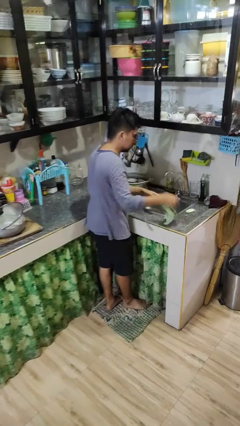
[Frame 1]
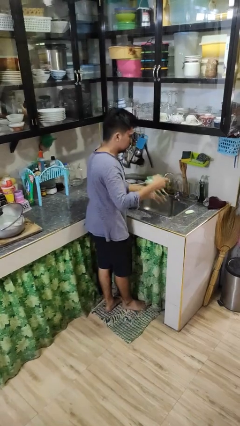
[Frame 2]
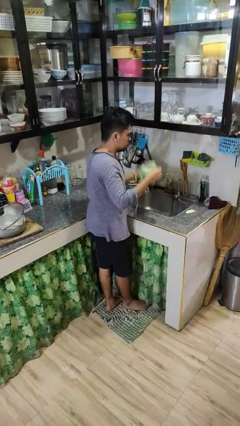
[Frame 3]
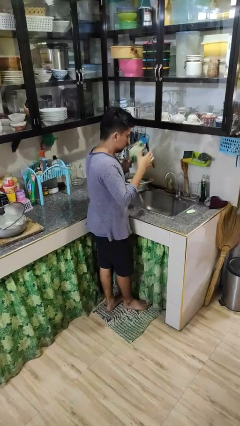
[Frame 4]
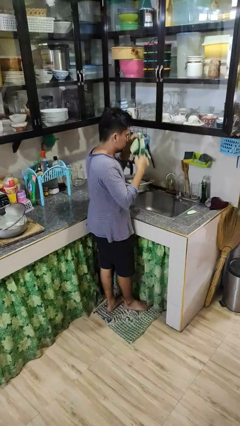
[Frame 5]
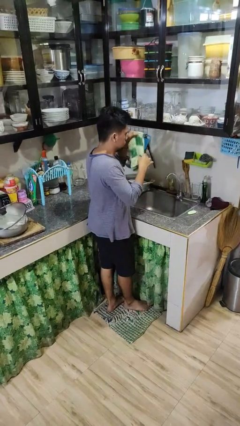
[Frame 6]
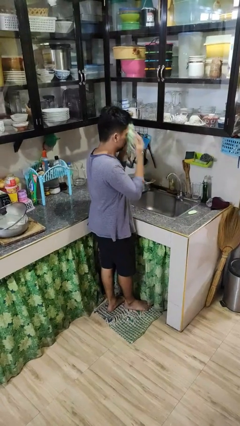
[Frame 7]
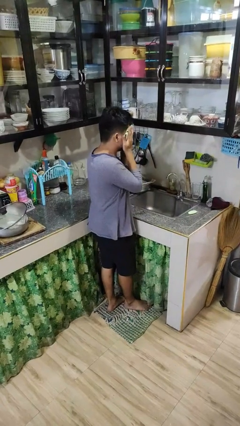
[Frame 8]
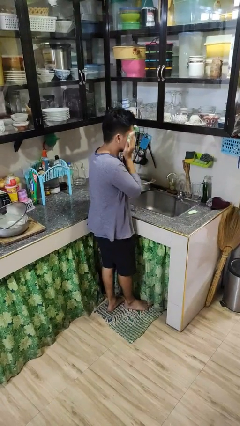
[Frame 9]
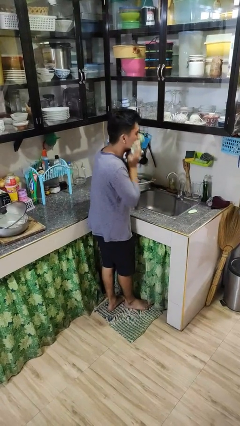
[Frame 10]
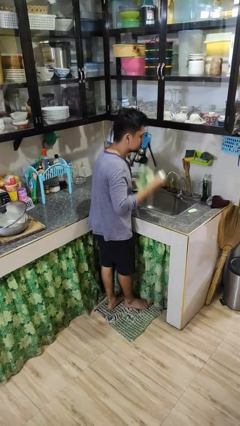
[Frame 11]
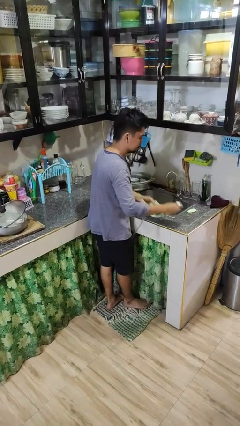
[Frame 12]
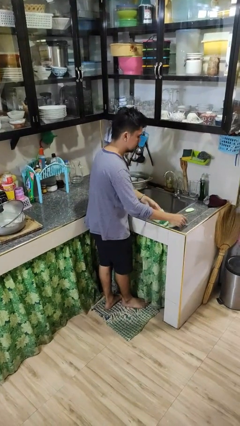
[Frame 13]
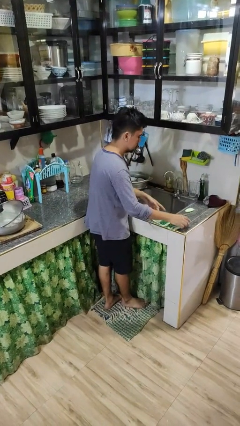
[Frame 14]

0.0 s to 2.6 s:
person dries face with towel

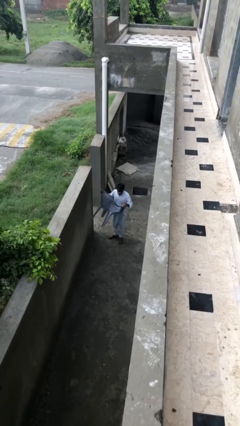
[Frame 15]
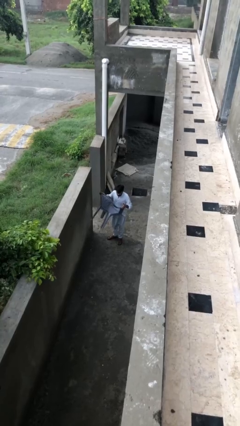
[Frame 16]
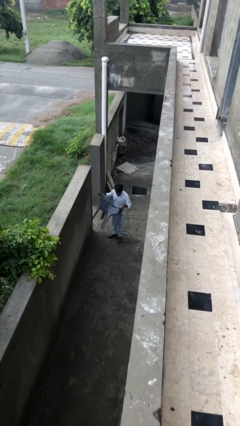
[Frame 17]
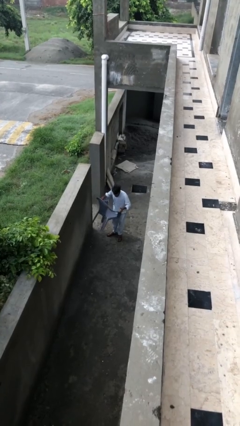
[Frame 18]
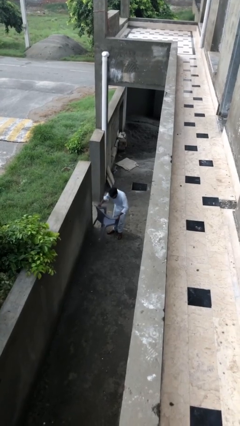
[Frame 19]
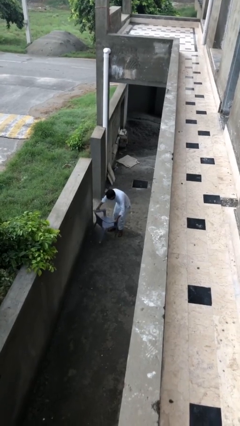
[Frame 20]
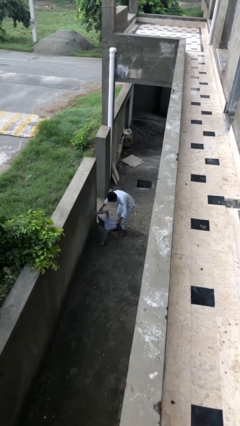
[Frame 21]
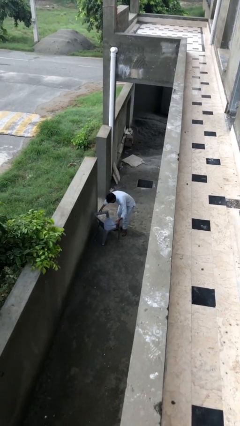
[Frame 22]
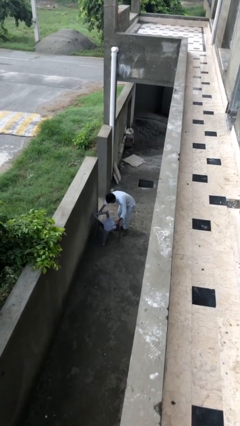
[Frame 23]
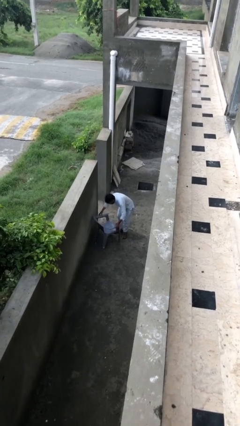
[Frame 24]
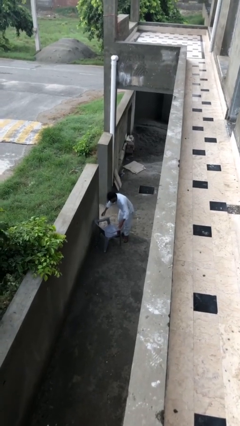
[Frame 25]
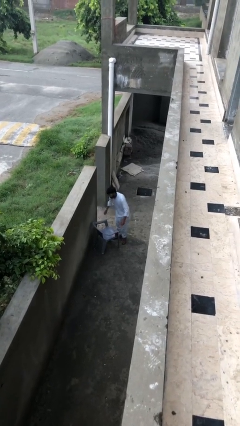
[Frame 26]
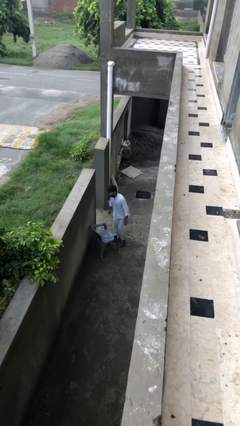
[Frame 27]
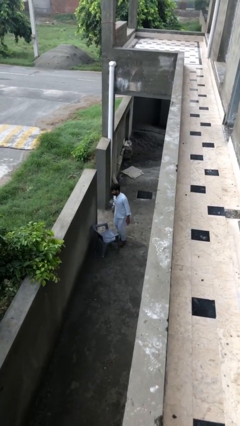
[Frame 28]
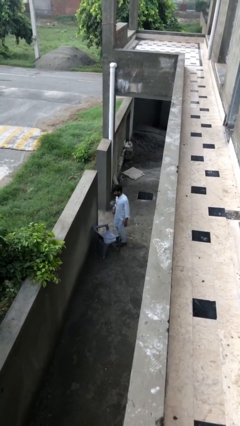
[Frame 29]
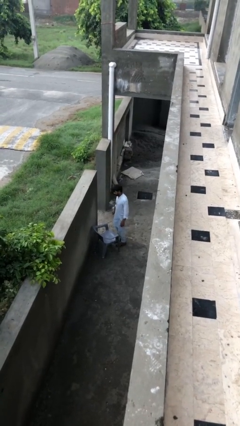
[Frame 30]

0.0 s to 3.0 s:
person puts down object on floor

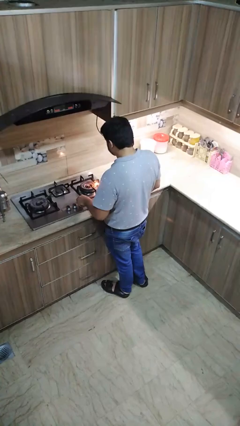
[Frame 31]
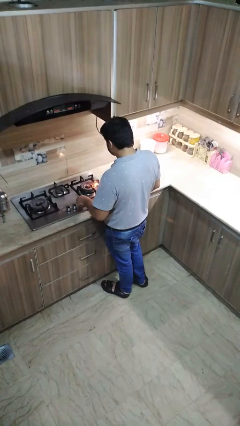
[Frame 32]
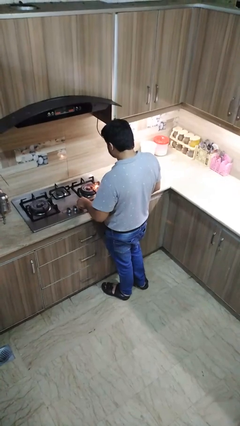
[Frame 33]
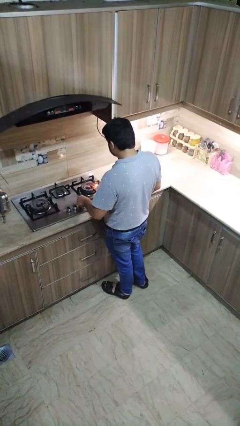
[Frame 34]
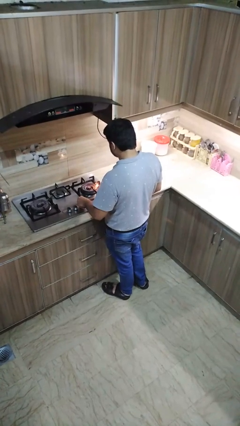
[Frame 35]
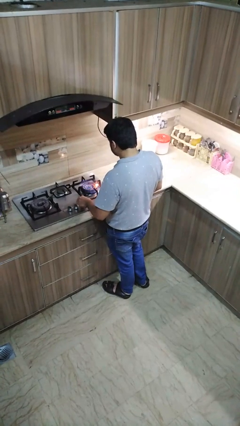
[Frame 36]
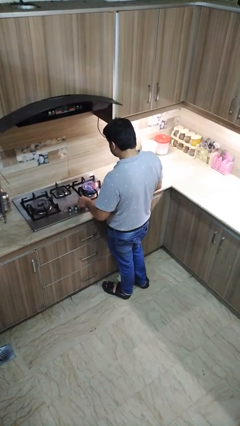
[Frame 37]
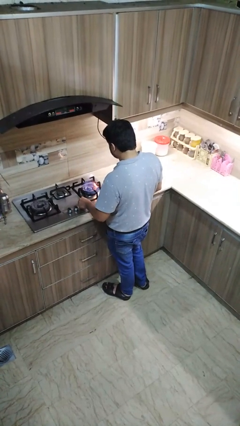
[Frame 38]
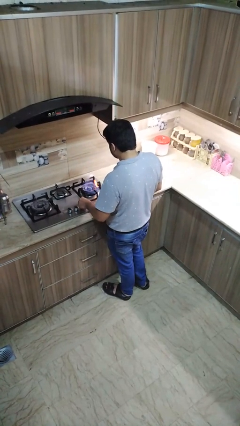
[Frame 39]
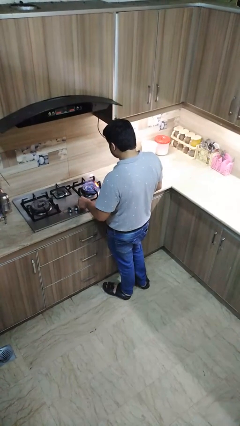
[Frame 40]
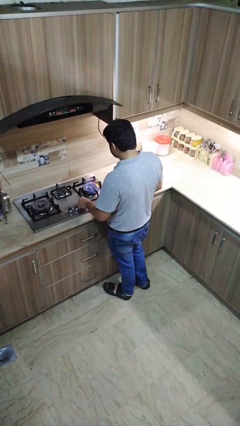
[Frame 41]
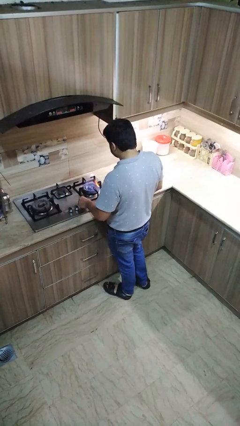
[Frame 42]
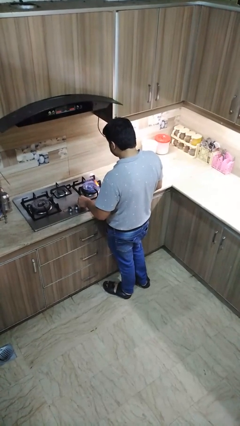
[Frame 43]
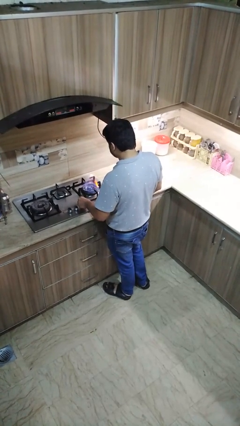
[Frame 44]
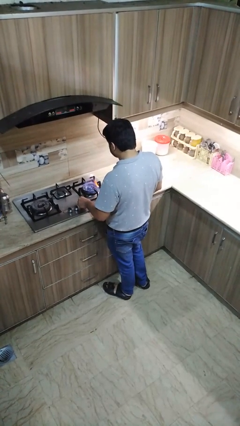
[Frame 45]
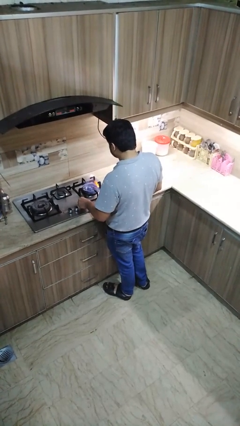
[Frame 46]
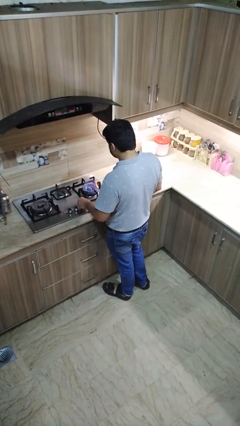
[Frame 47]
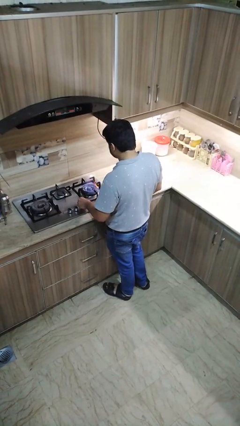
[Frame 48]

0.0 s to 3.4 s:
person turns on stovetop

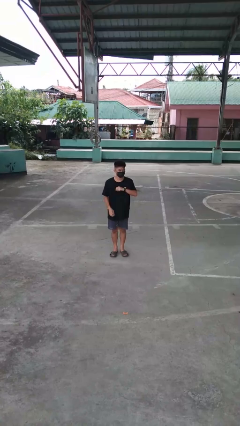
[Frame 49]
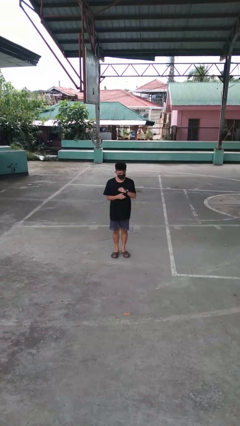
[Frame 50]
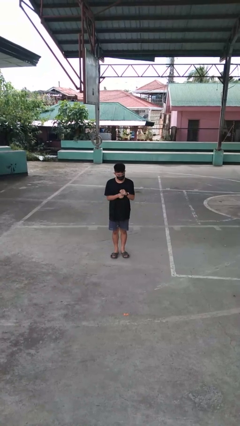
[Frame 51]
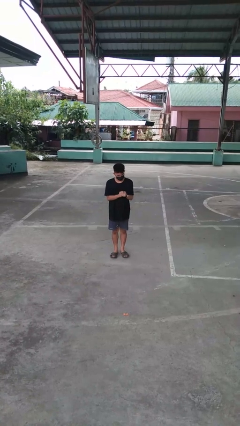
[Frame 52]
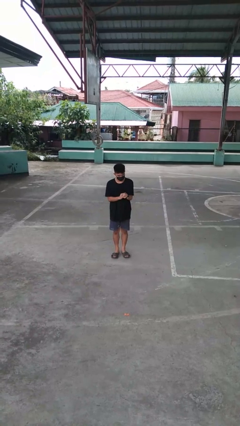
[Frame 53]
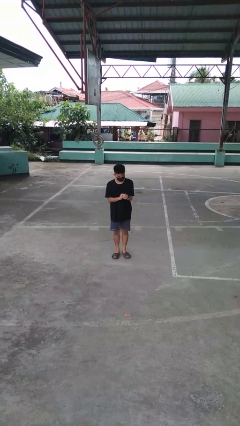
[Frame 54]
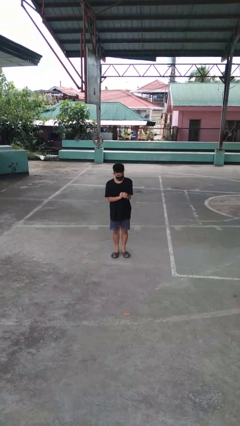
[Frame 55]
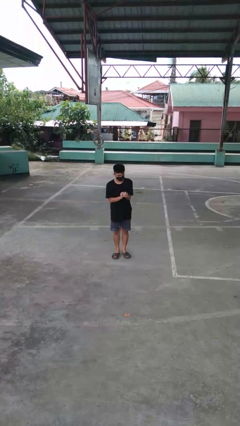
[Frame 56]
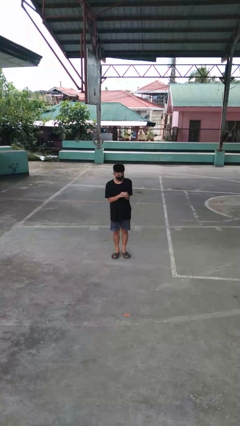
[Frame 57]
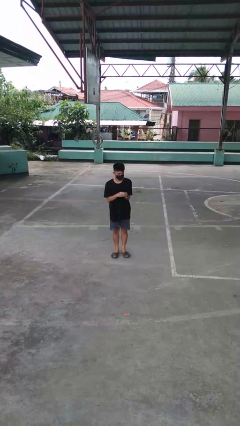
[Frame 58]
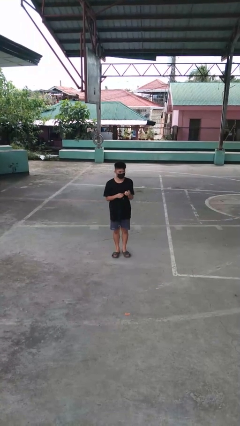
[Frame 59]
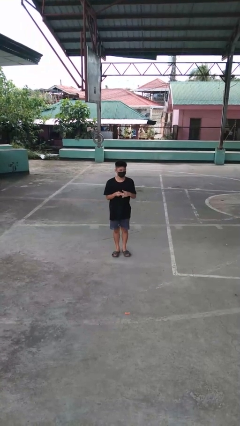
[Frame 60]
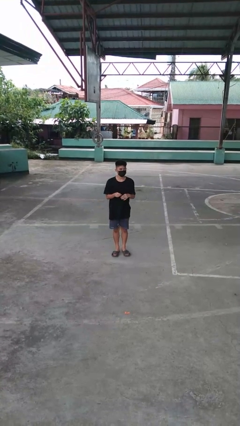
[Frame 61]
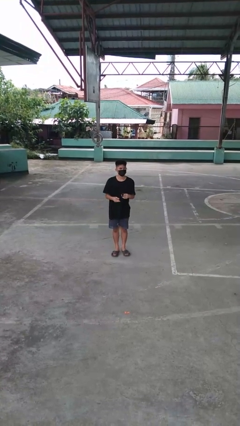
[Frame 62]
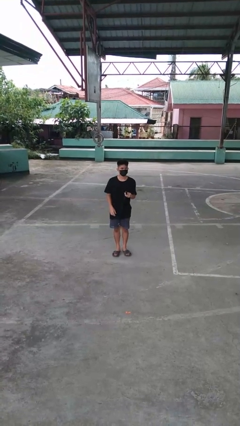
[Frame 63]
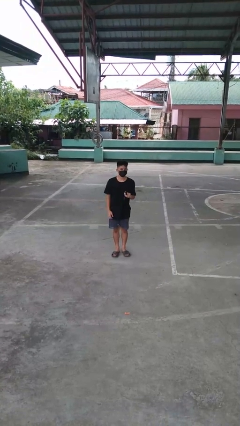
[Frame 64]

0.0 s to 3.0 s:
person takes off wristwatch

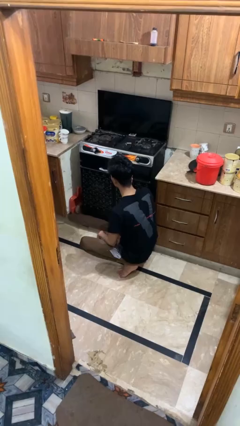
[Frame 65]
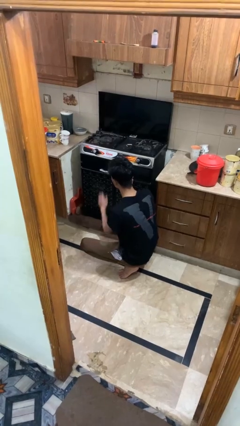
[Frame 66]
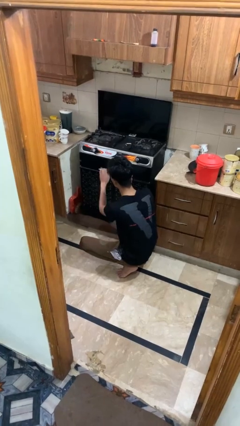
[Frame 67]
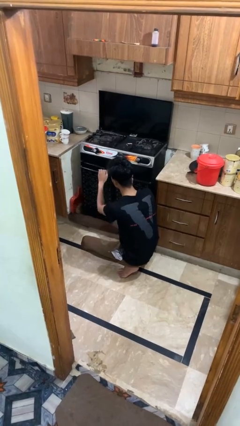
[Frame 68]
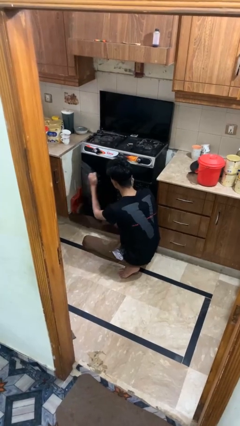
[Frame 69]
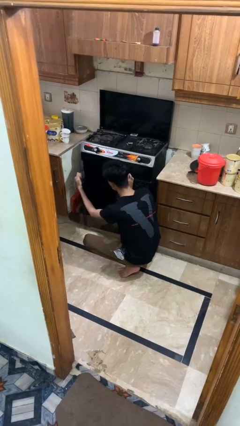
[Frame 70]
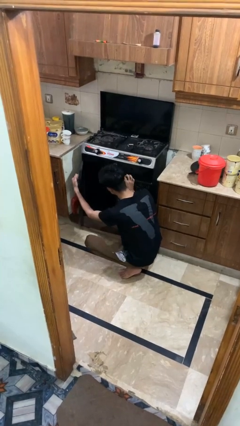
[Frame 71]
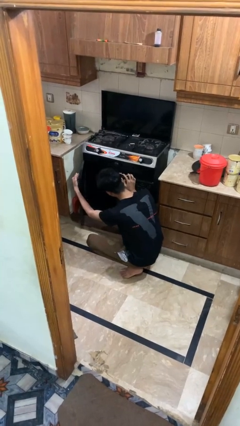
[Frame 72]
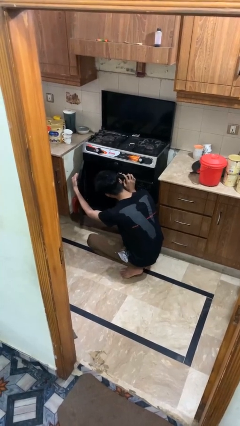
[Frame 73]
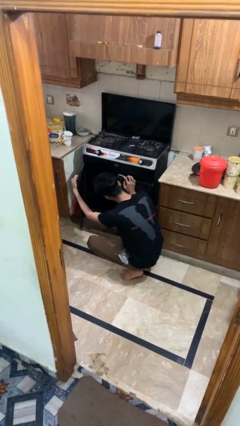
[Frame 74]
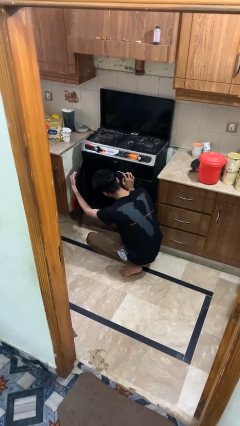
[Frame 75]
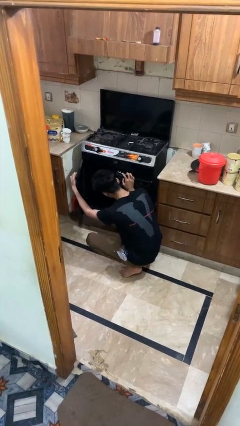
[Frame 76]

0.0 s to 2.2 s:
person opens oven door

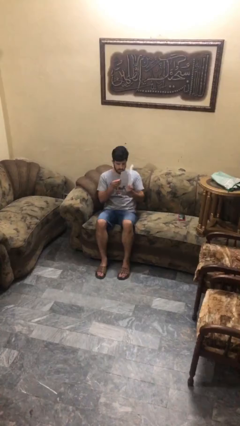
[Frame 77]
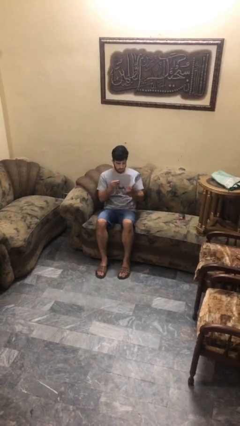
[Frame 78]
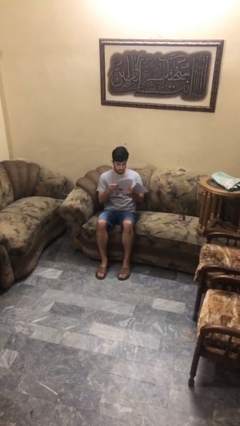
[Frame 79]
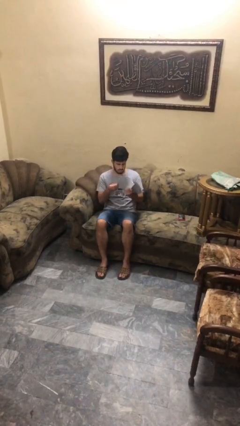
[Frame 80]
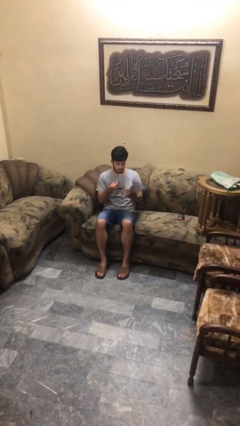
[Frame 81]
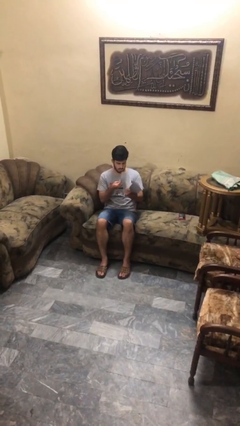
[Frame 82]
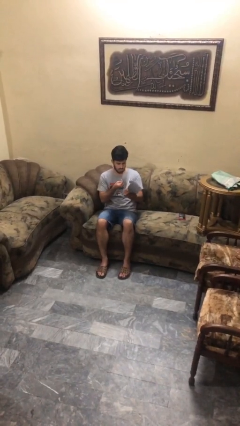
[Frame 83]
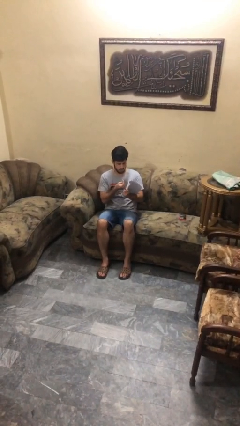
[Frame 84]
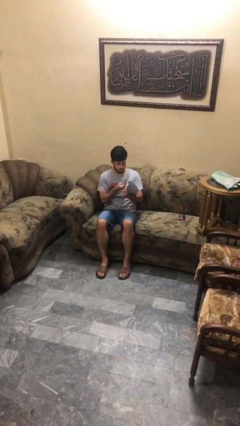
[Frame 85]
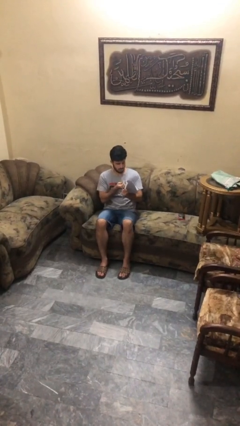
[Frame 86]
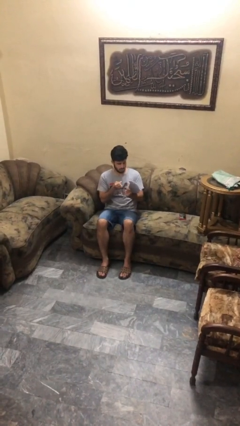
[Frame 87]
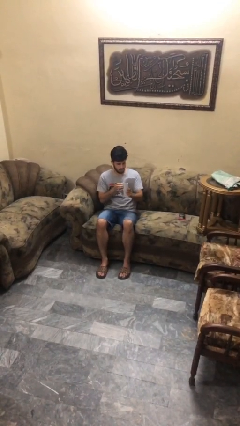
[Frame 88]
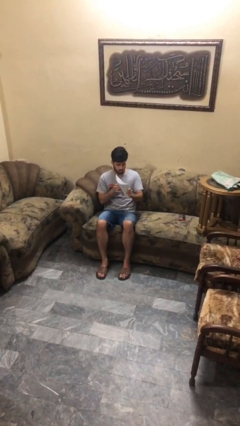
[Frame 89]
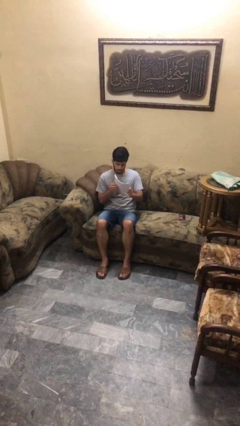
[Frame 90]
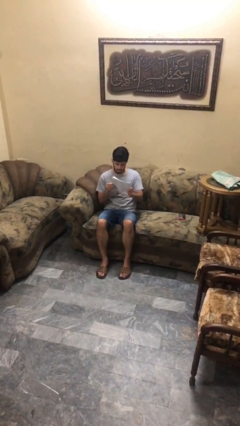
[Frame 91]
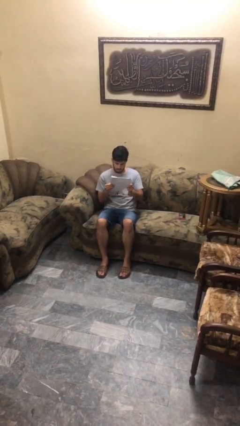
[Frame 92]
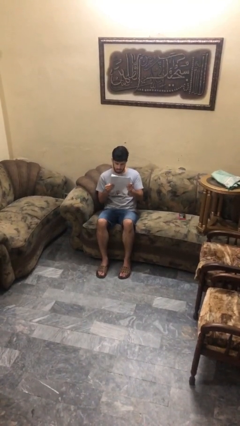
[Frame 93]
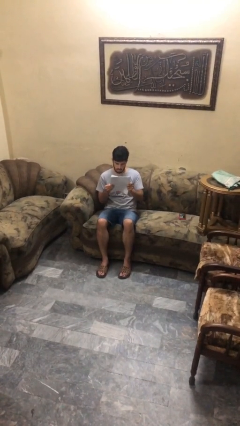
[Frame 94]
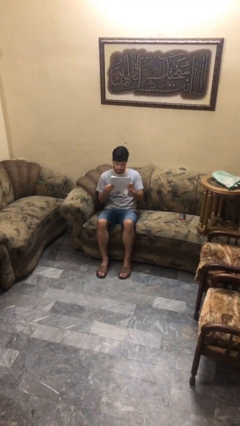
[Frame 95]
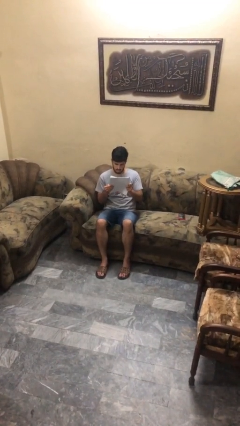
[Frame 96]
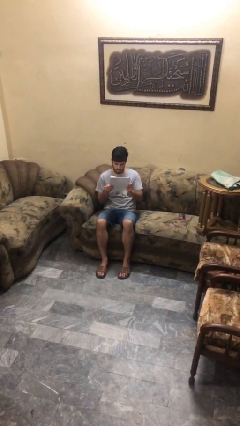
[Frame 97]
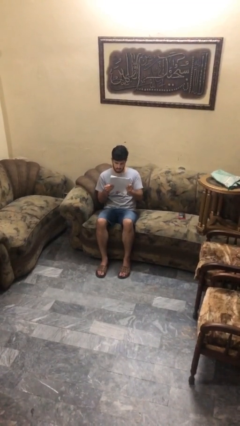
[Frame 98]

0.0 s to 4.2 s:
person reads magazine
